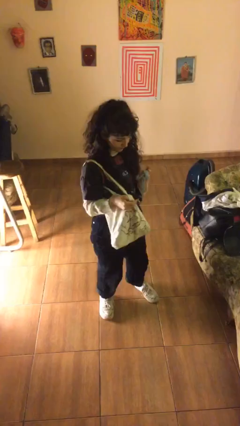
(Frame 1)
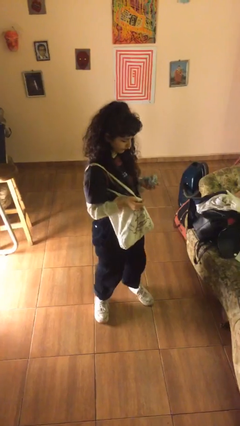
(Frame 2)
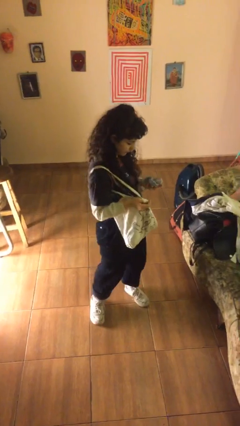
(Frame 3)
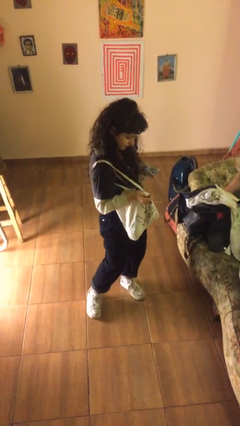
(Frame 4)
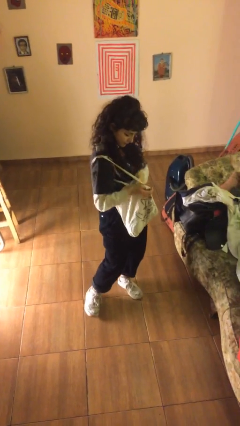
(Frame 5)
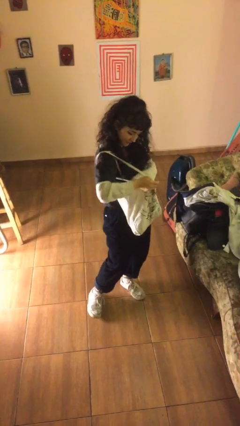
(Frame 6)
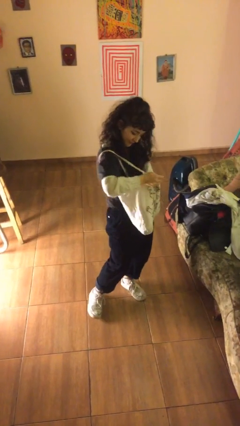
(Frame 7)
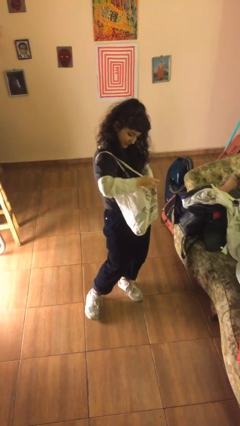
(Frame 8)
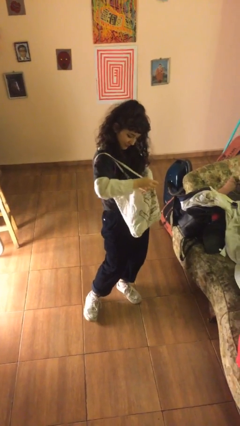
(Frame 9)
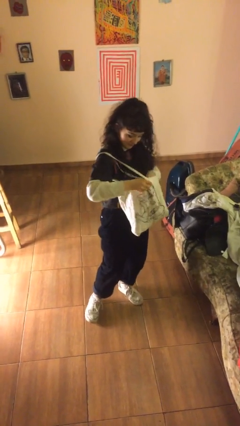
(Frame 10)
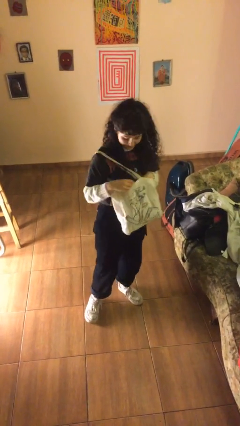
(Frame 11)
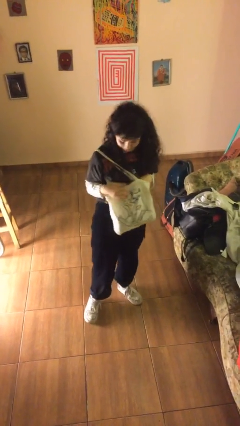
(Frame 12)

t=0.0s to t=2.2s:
person puts object into purse

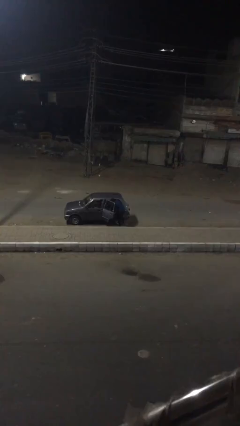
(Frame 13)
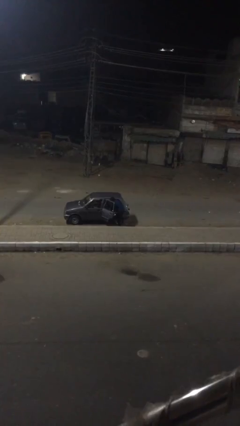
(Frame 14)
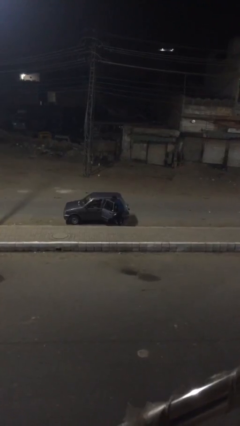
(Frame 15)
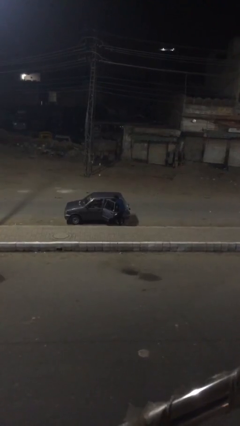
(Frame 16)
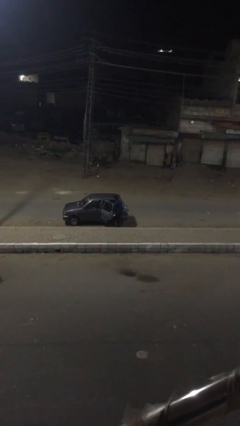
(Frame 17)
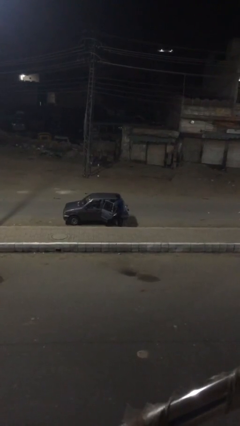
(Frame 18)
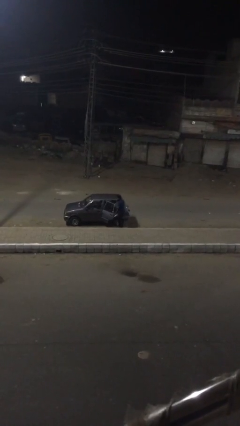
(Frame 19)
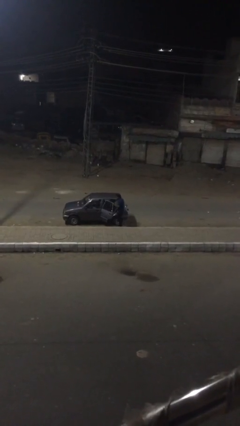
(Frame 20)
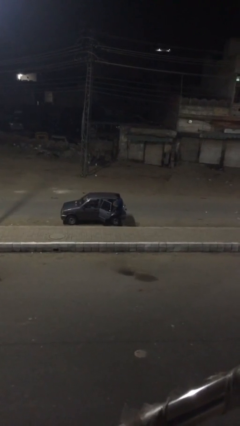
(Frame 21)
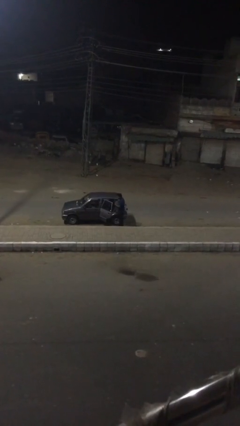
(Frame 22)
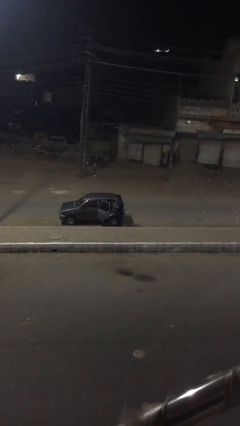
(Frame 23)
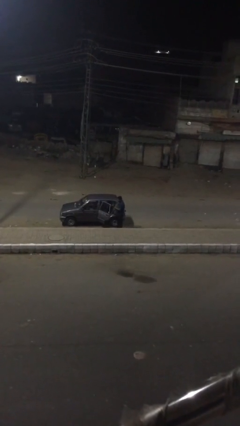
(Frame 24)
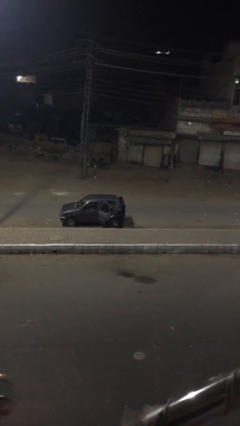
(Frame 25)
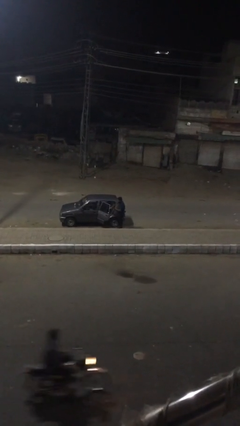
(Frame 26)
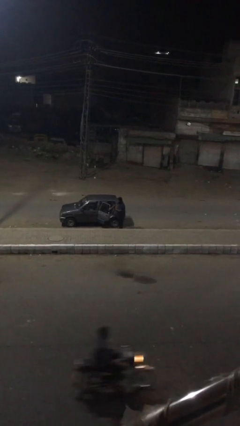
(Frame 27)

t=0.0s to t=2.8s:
person unloads car

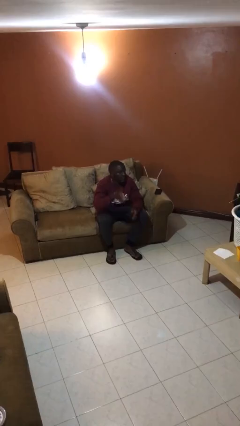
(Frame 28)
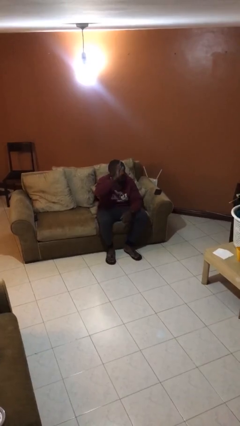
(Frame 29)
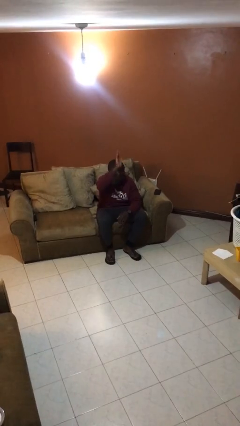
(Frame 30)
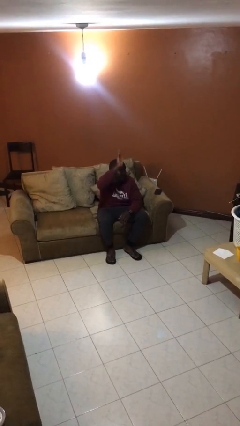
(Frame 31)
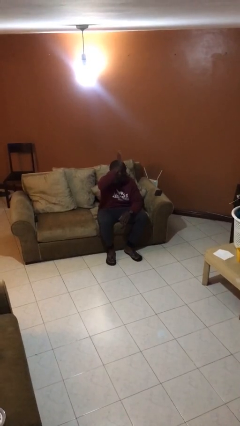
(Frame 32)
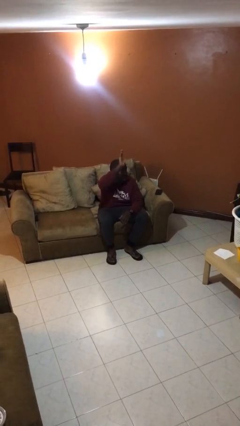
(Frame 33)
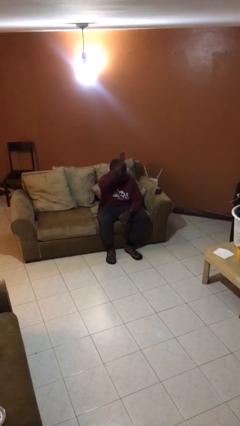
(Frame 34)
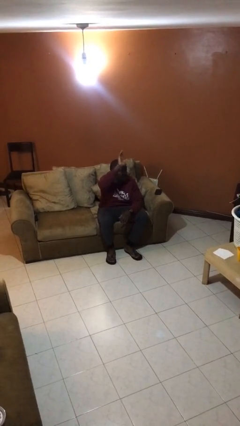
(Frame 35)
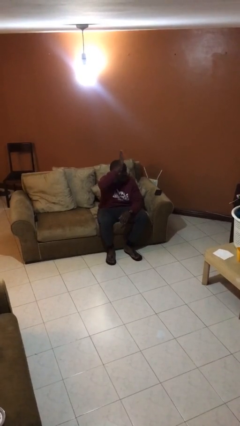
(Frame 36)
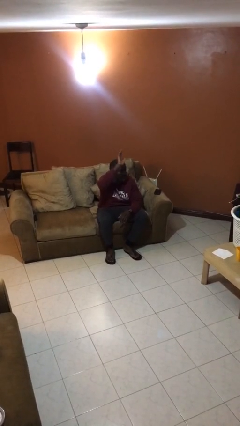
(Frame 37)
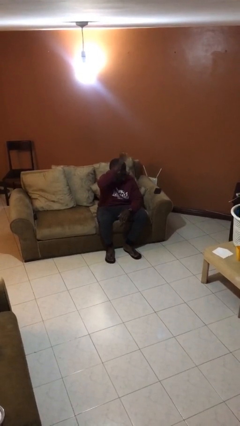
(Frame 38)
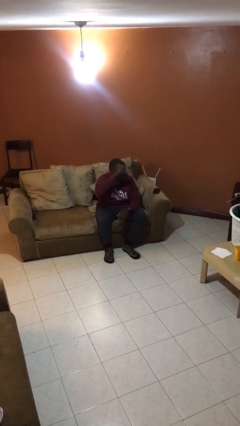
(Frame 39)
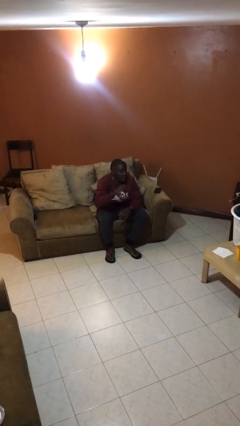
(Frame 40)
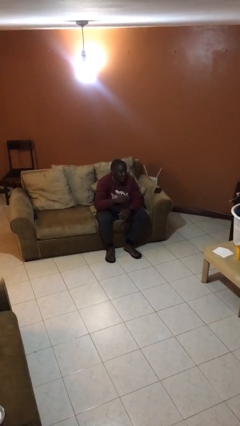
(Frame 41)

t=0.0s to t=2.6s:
person waves at person

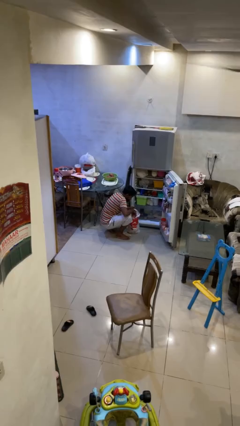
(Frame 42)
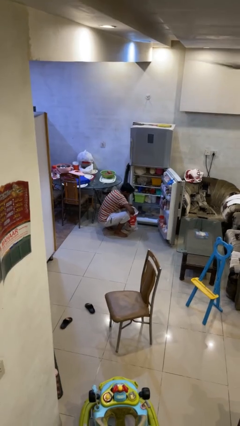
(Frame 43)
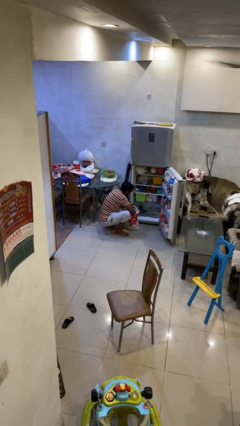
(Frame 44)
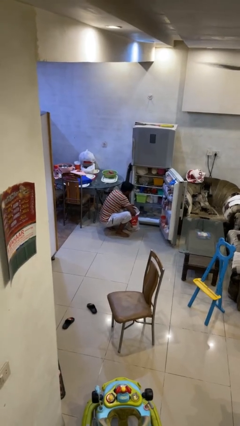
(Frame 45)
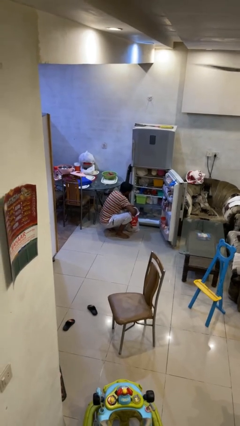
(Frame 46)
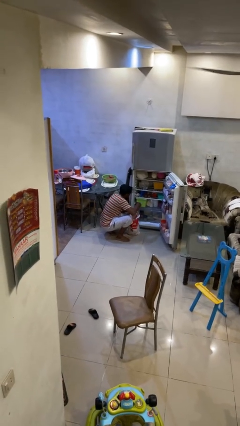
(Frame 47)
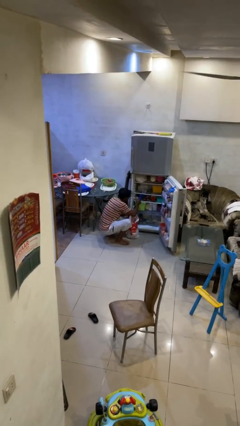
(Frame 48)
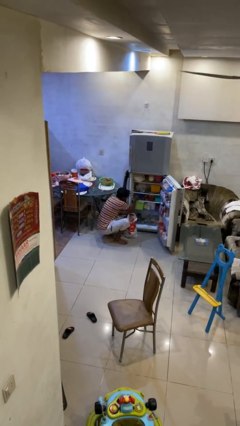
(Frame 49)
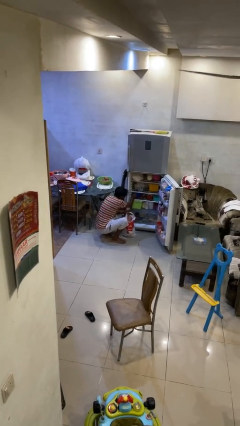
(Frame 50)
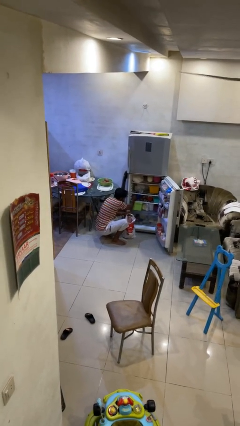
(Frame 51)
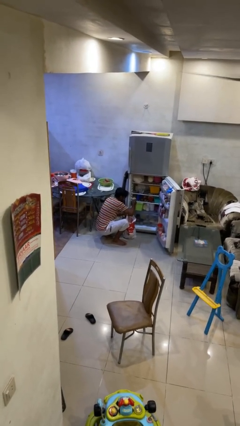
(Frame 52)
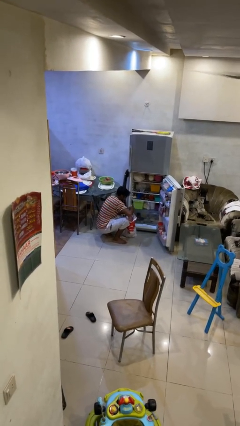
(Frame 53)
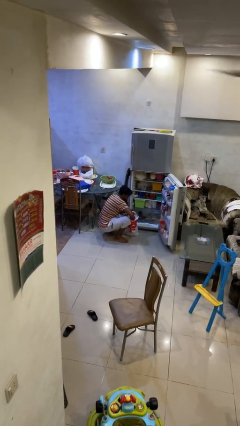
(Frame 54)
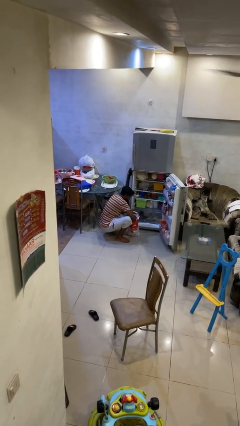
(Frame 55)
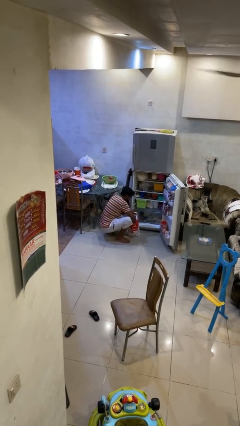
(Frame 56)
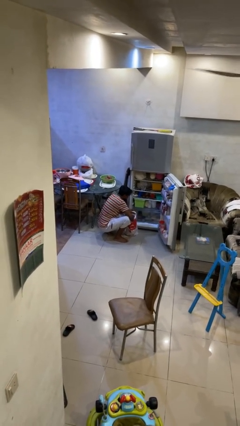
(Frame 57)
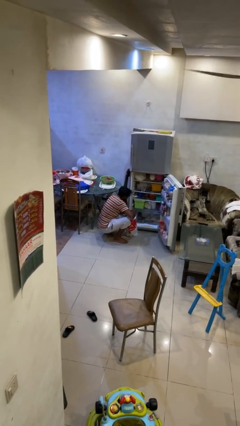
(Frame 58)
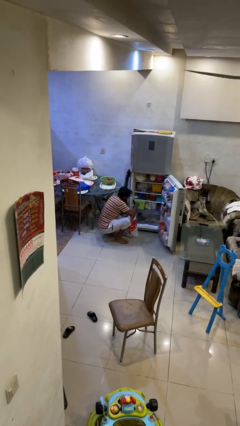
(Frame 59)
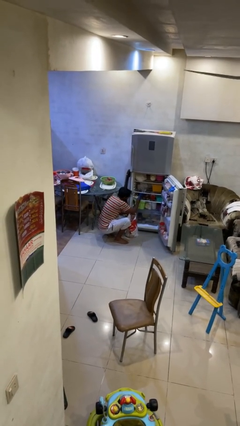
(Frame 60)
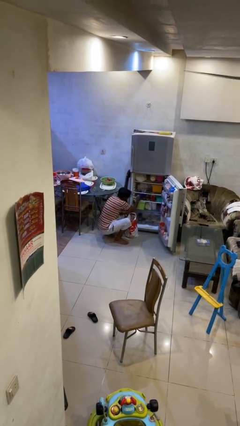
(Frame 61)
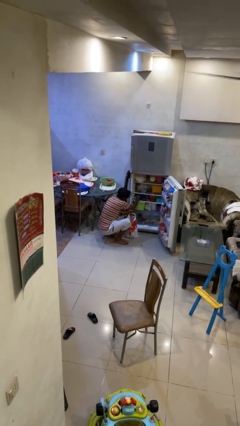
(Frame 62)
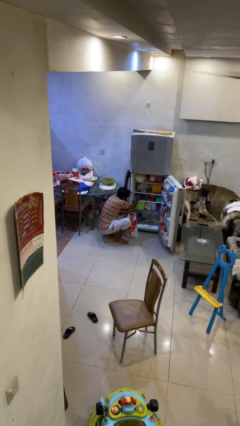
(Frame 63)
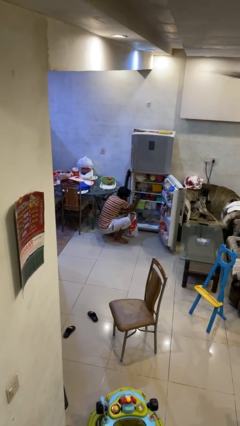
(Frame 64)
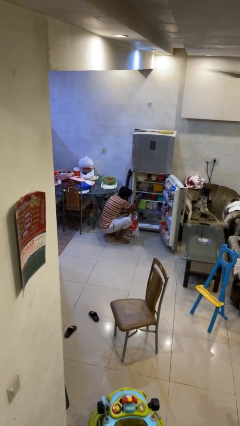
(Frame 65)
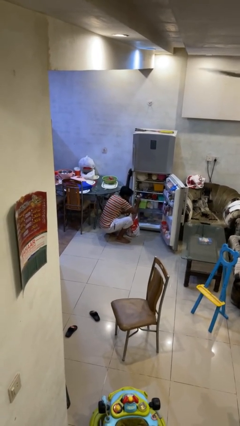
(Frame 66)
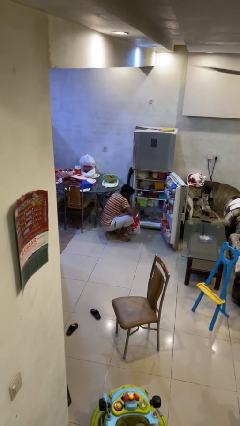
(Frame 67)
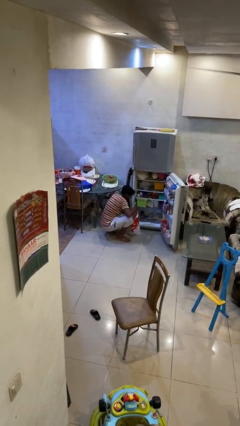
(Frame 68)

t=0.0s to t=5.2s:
person loads groceries into refrigerator

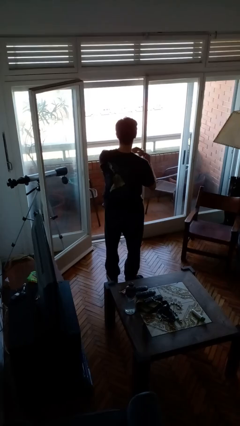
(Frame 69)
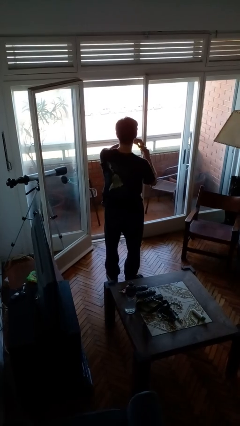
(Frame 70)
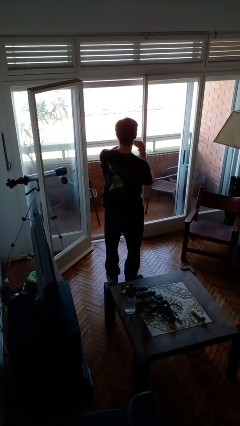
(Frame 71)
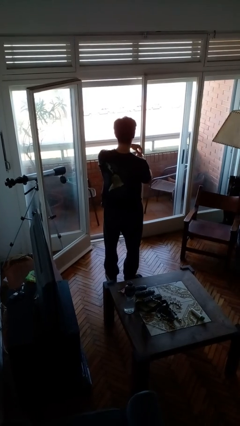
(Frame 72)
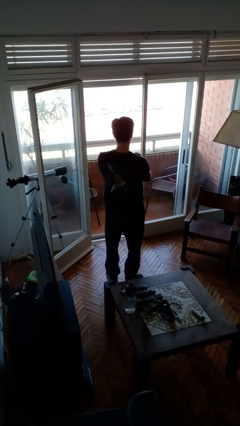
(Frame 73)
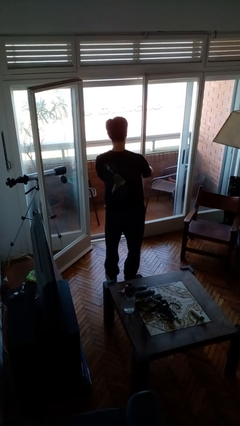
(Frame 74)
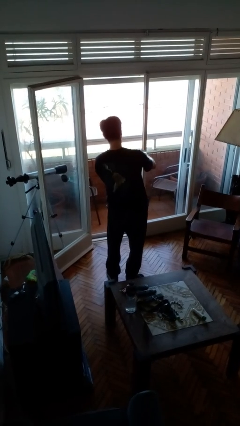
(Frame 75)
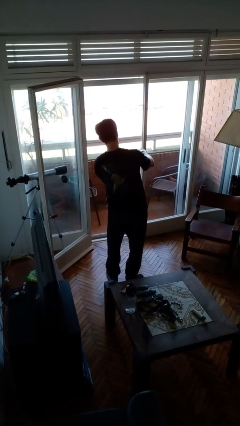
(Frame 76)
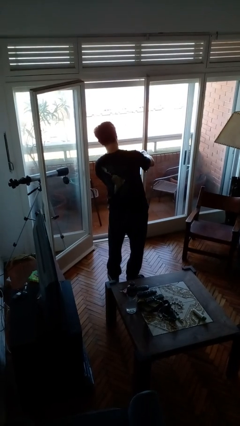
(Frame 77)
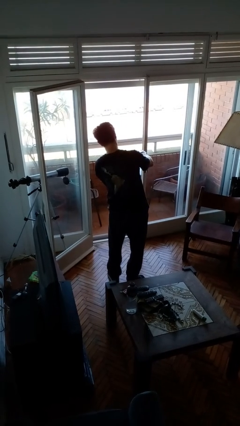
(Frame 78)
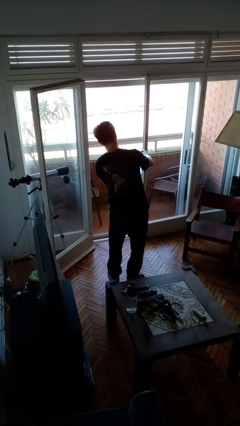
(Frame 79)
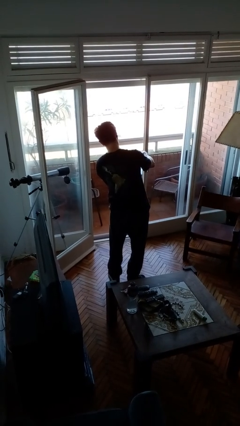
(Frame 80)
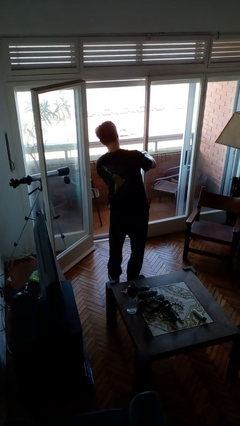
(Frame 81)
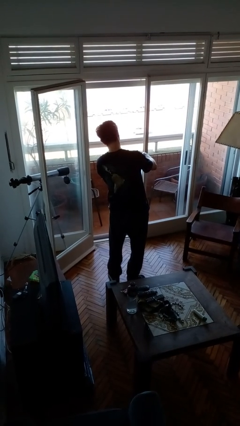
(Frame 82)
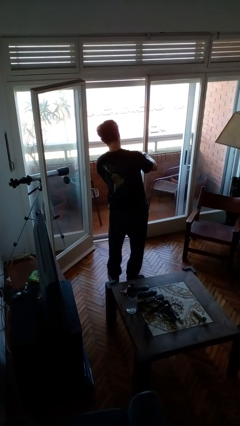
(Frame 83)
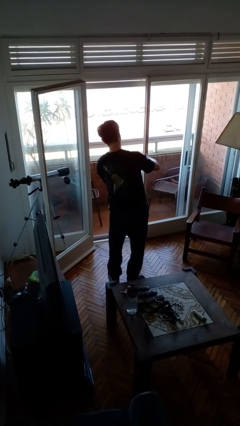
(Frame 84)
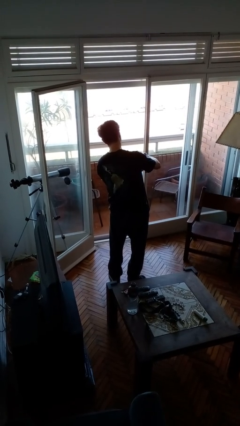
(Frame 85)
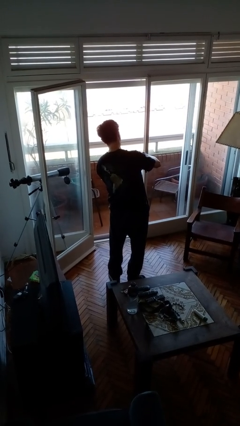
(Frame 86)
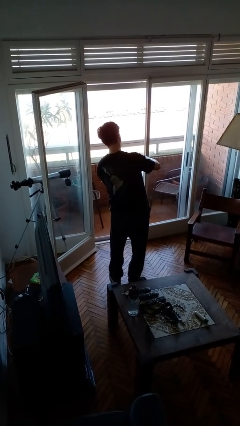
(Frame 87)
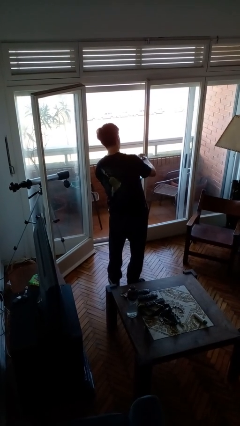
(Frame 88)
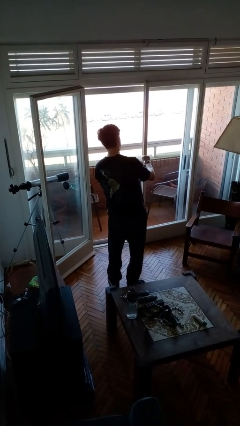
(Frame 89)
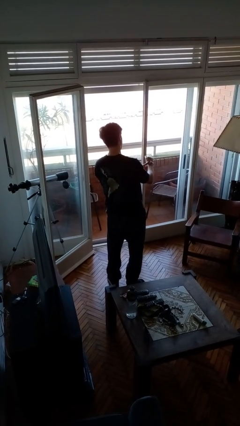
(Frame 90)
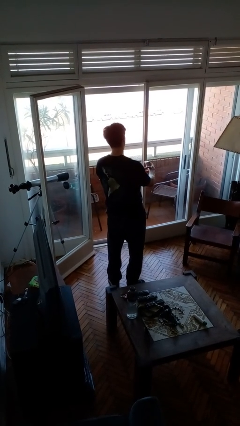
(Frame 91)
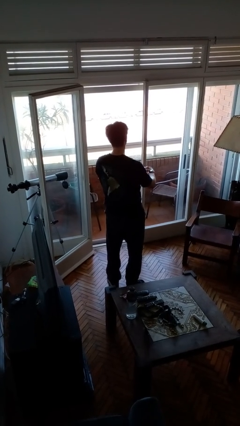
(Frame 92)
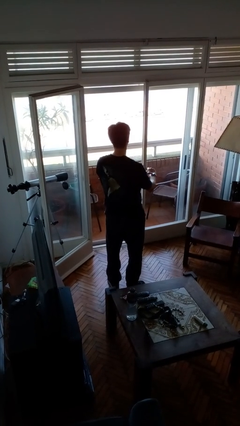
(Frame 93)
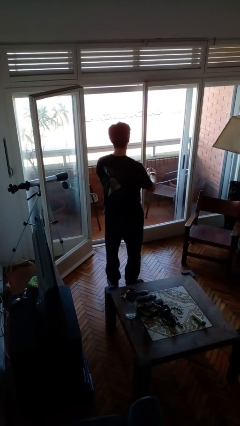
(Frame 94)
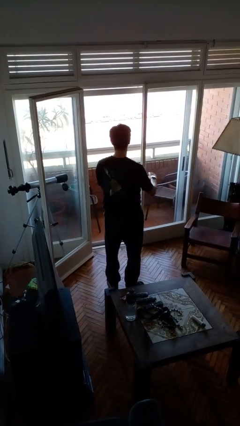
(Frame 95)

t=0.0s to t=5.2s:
person puts on wristwatch
